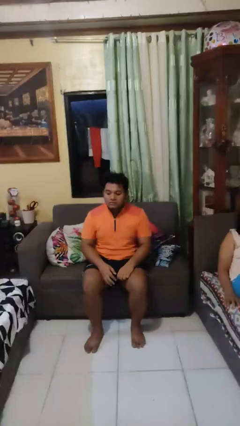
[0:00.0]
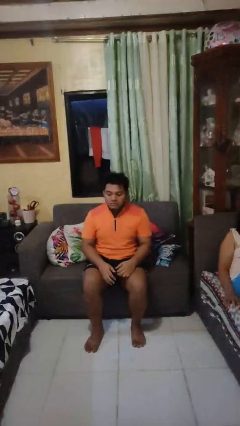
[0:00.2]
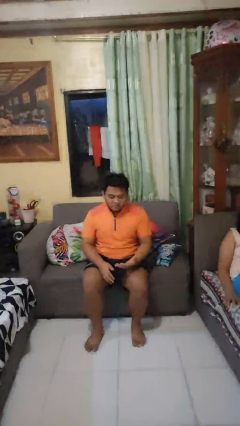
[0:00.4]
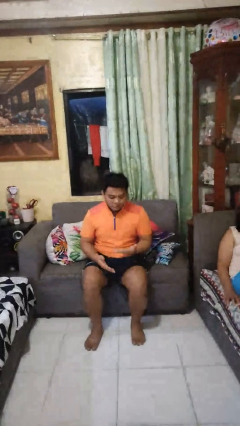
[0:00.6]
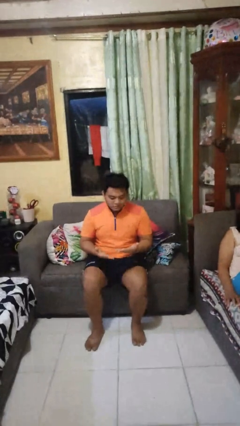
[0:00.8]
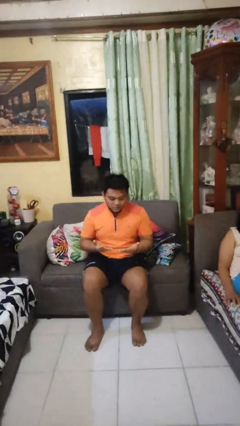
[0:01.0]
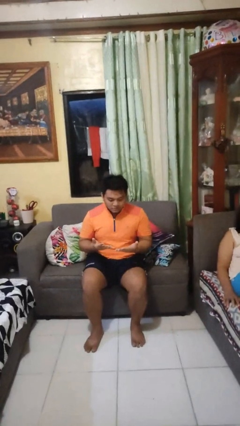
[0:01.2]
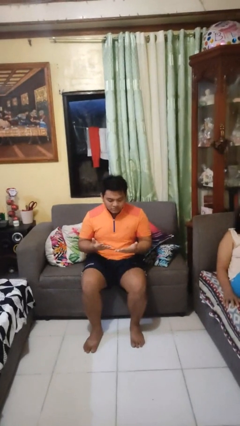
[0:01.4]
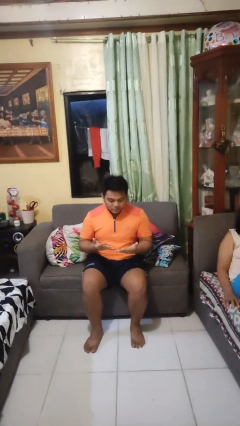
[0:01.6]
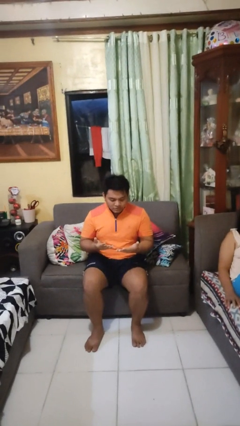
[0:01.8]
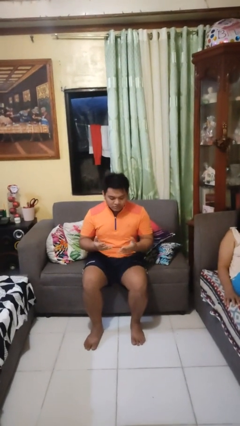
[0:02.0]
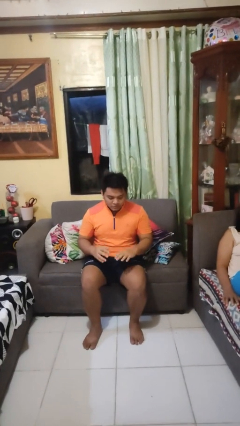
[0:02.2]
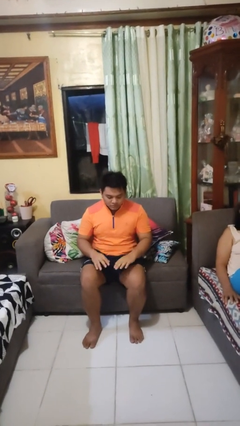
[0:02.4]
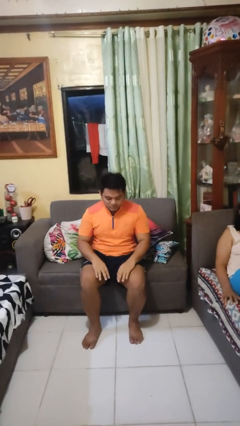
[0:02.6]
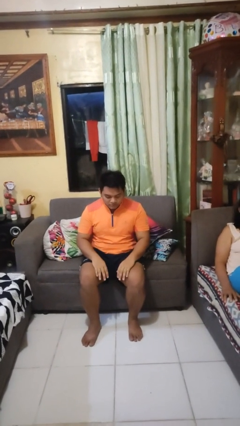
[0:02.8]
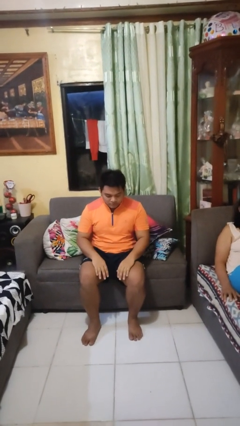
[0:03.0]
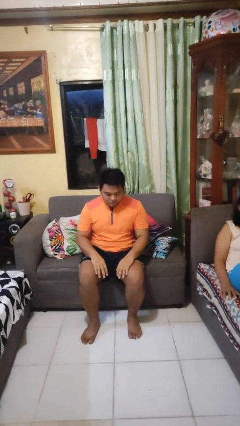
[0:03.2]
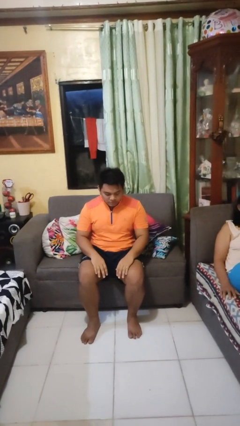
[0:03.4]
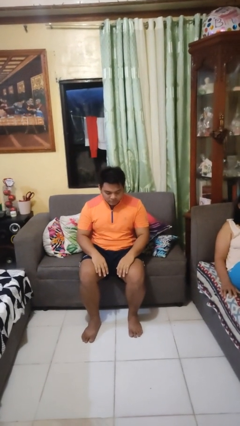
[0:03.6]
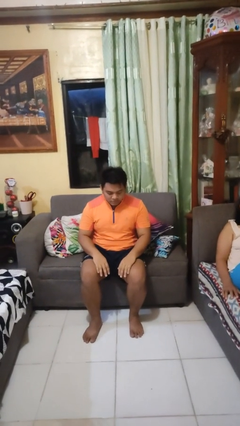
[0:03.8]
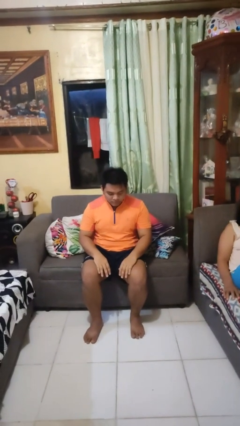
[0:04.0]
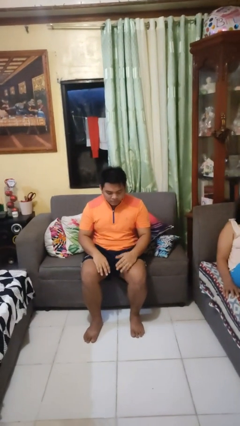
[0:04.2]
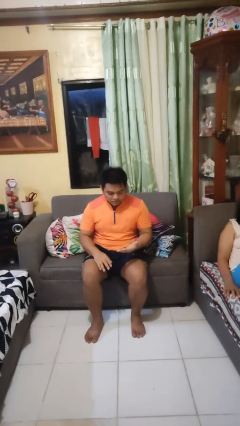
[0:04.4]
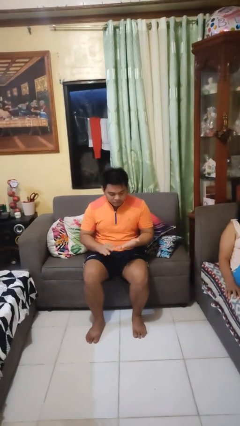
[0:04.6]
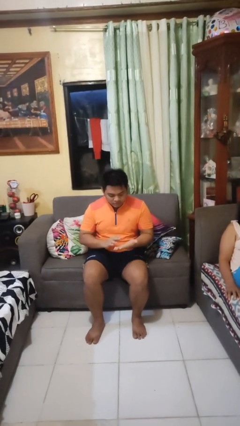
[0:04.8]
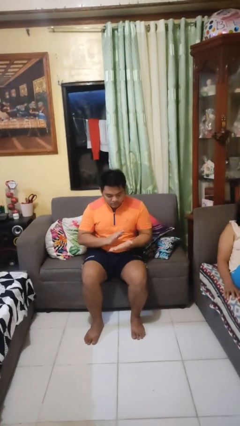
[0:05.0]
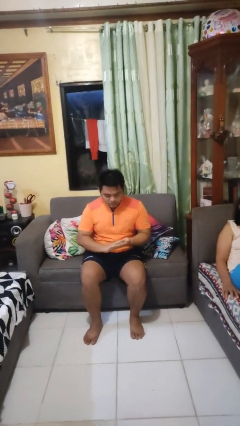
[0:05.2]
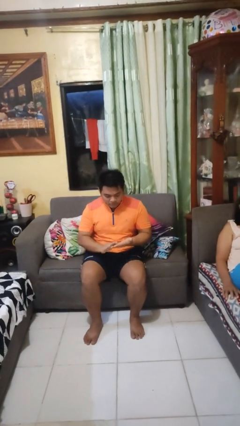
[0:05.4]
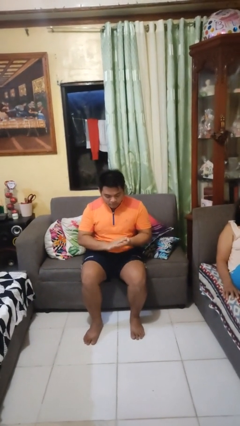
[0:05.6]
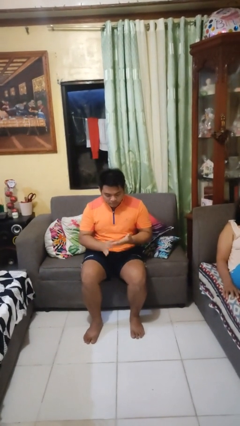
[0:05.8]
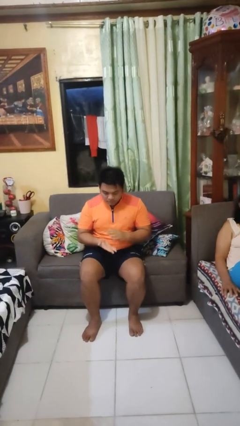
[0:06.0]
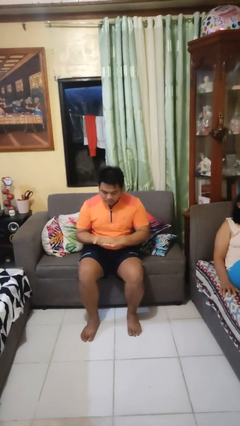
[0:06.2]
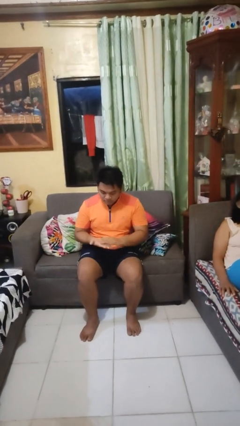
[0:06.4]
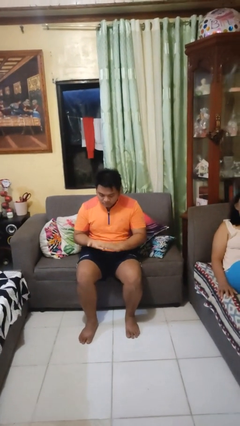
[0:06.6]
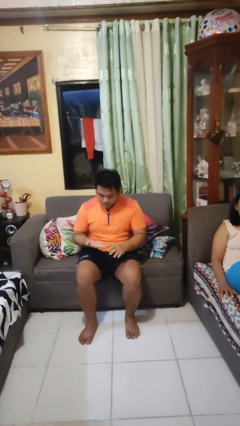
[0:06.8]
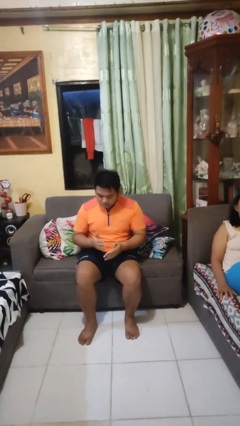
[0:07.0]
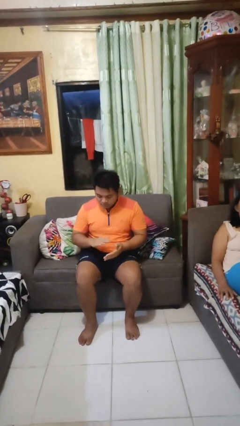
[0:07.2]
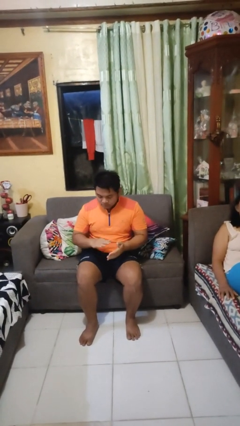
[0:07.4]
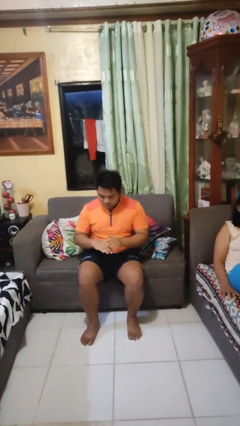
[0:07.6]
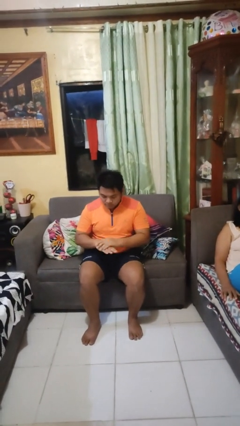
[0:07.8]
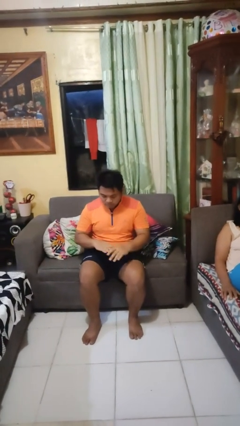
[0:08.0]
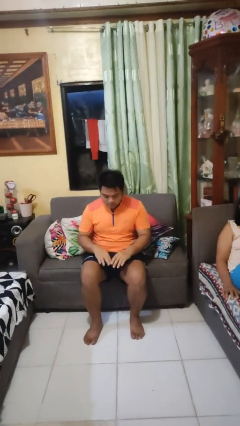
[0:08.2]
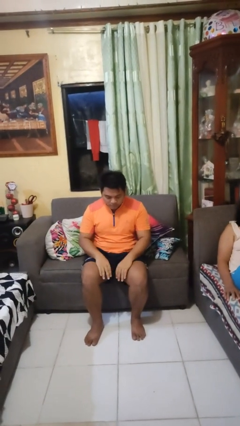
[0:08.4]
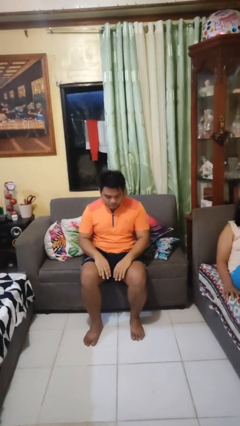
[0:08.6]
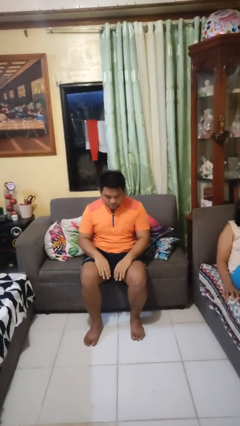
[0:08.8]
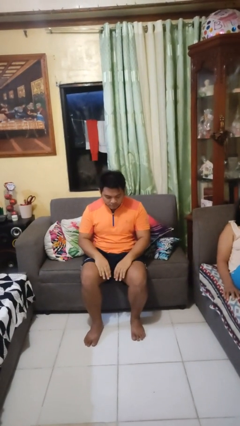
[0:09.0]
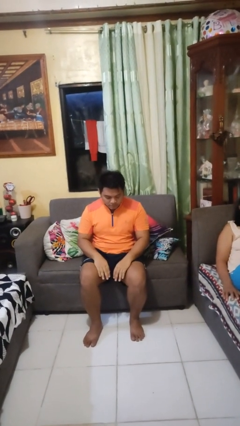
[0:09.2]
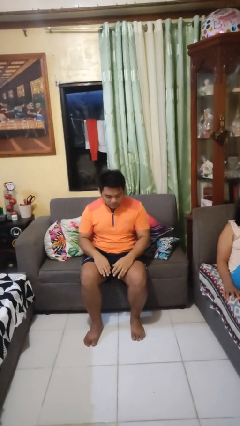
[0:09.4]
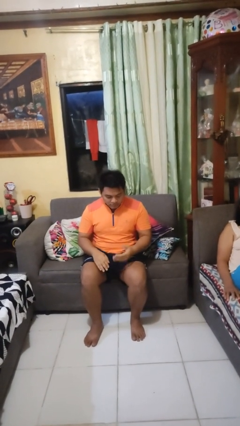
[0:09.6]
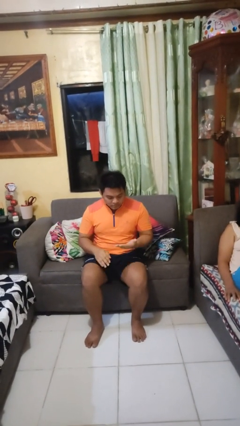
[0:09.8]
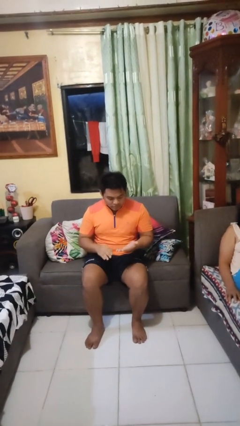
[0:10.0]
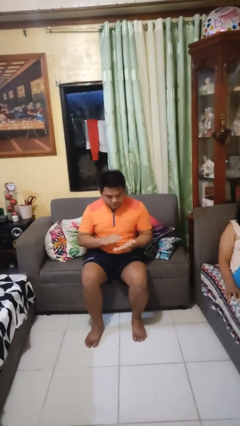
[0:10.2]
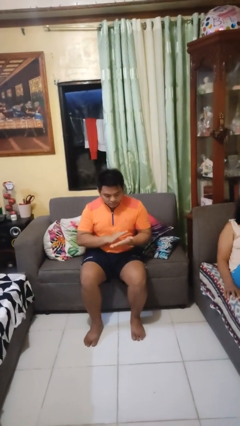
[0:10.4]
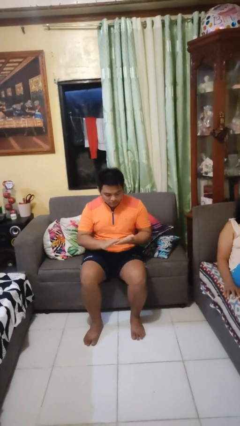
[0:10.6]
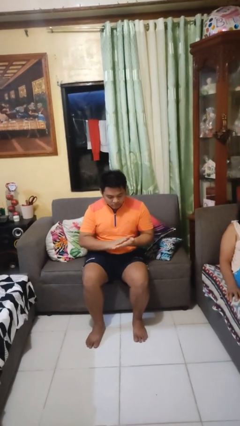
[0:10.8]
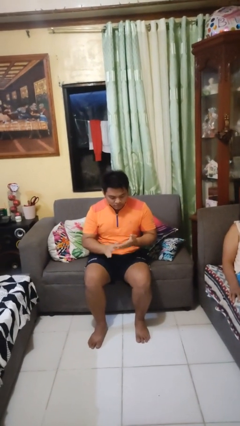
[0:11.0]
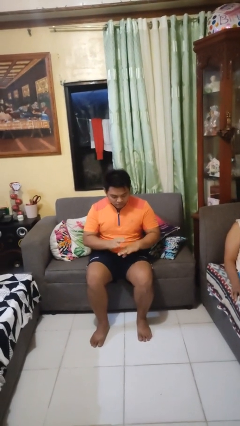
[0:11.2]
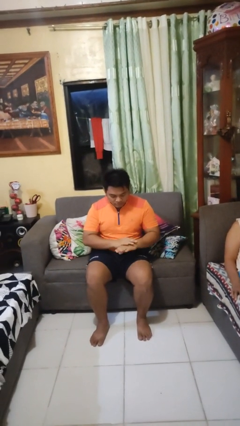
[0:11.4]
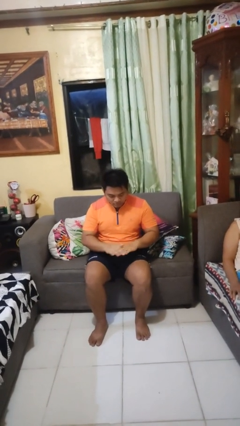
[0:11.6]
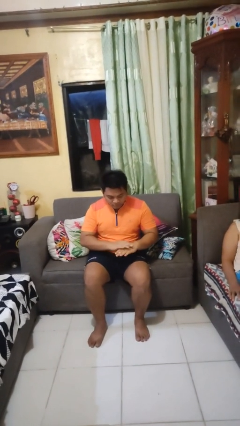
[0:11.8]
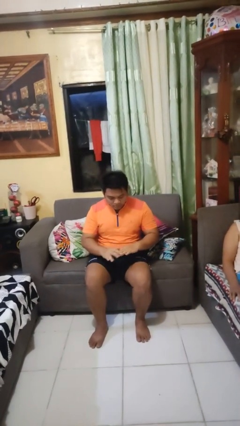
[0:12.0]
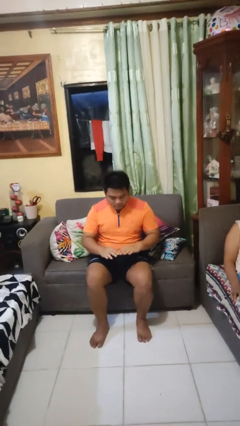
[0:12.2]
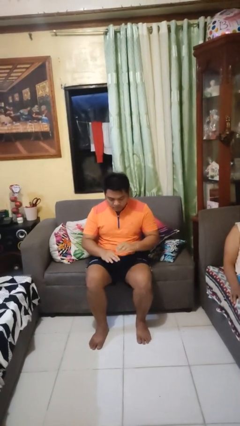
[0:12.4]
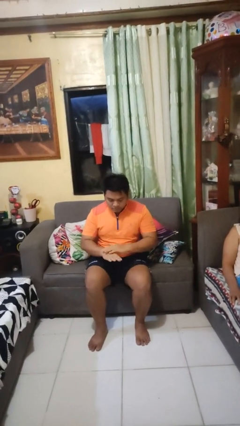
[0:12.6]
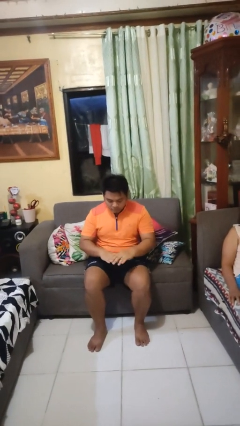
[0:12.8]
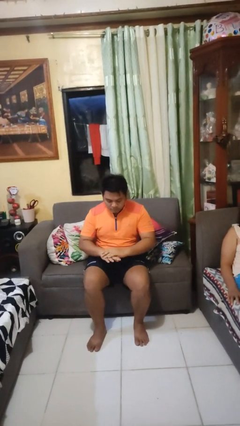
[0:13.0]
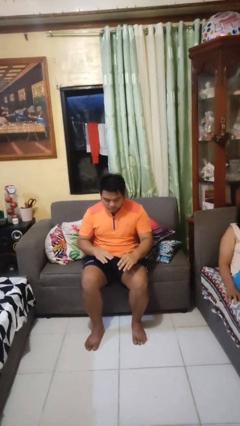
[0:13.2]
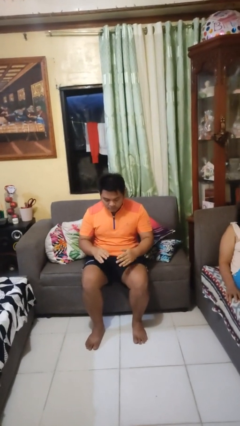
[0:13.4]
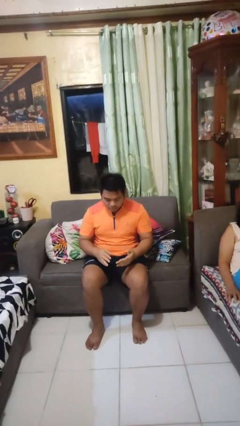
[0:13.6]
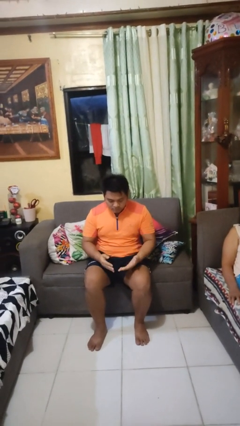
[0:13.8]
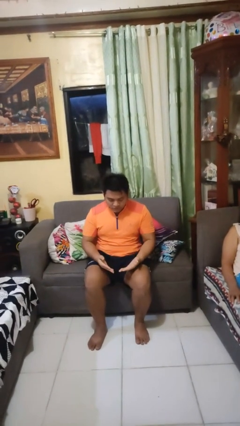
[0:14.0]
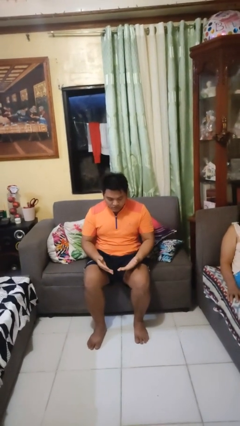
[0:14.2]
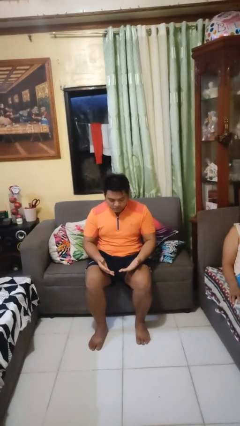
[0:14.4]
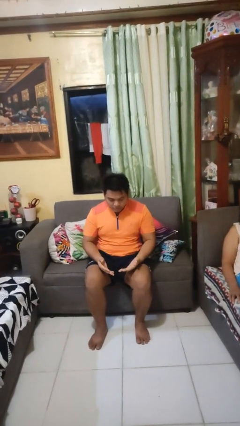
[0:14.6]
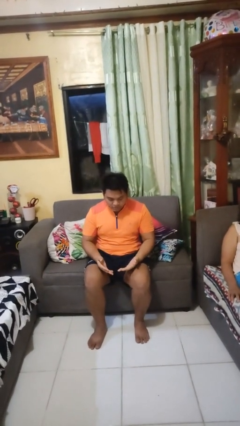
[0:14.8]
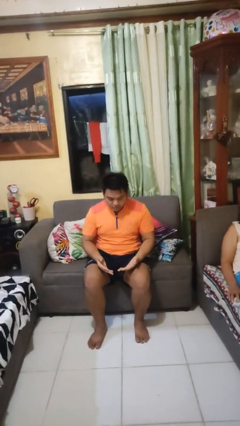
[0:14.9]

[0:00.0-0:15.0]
person looks at hands in lap

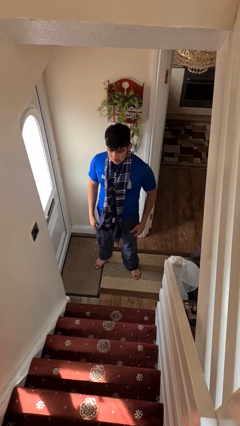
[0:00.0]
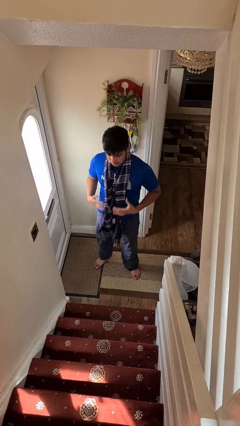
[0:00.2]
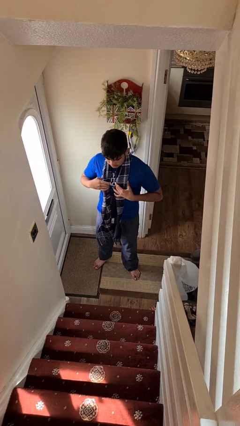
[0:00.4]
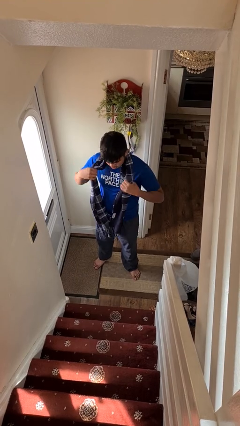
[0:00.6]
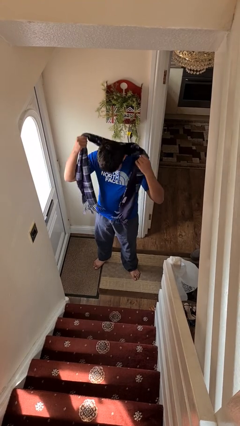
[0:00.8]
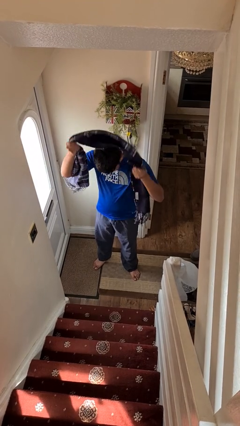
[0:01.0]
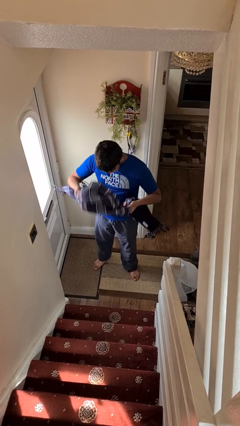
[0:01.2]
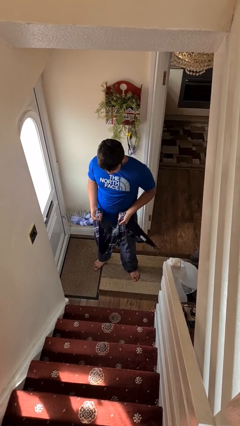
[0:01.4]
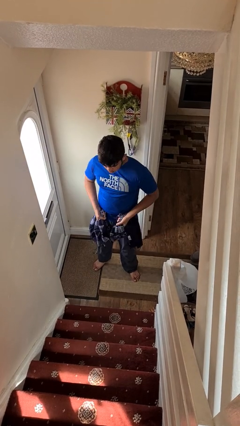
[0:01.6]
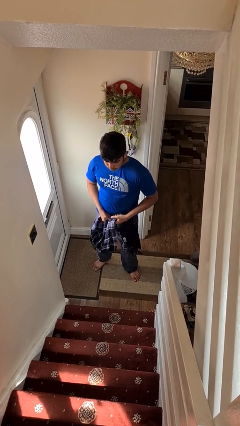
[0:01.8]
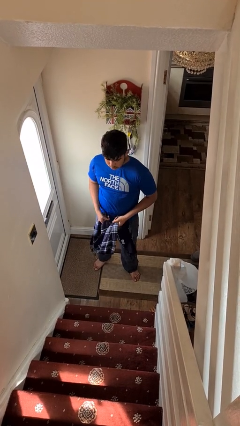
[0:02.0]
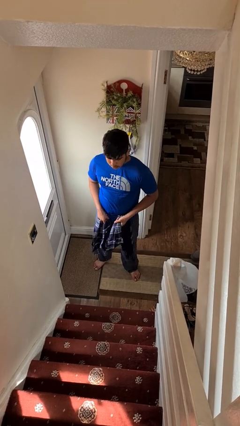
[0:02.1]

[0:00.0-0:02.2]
person takes off scarf

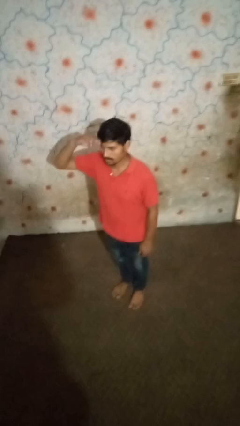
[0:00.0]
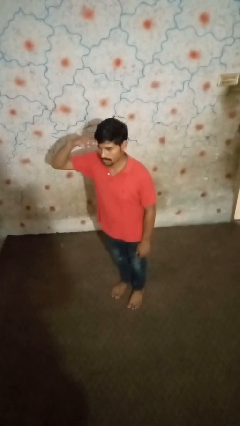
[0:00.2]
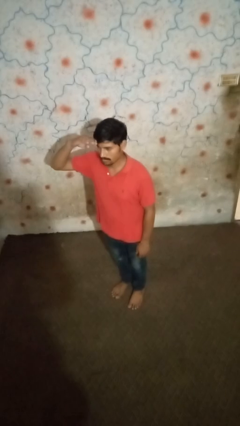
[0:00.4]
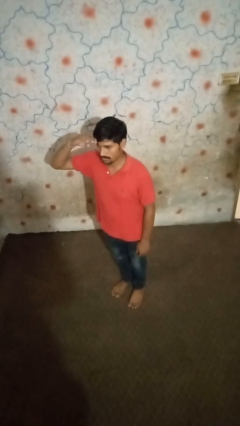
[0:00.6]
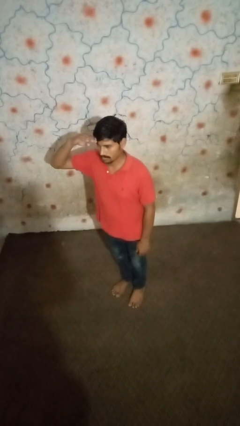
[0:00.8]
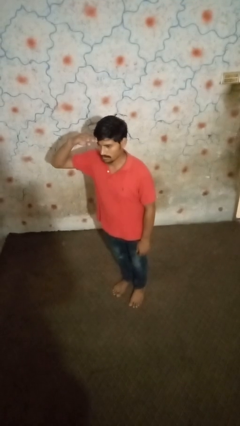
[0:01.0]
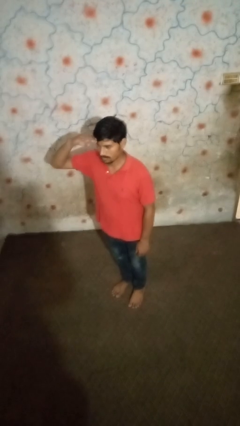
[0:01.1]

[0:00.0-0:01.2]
person salutes
